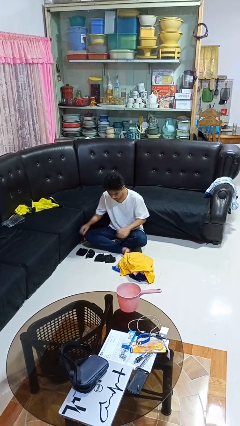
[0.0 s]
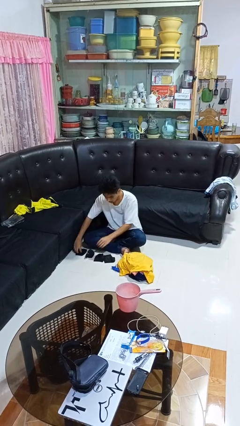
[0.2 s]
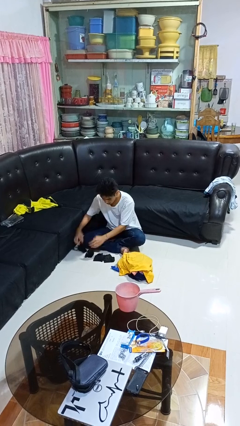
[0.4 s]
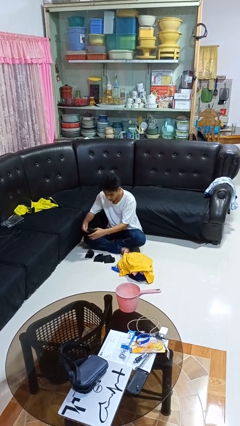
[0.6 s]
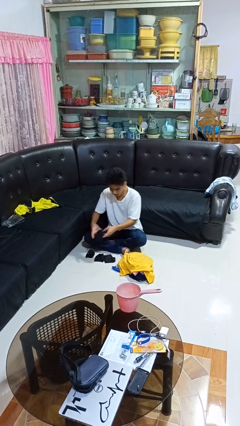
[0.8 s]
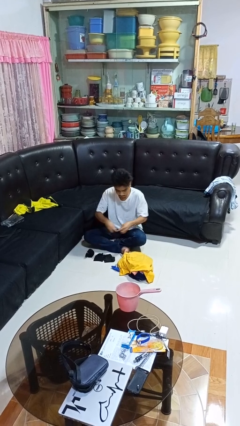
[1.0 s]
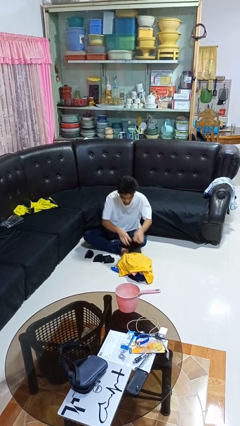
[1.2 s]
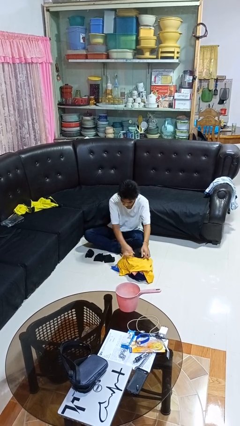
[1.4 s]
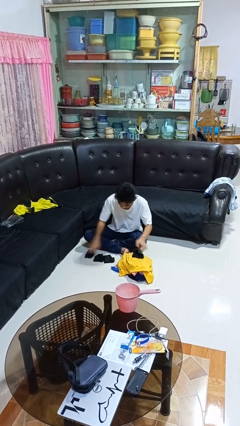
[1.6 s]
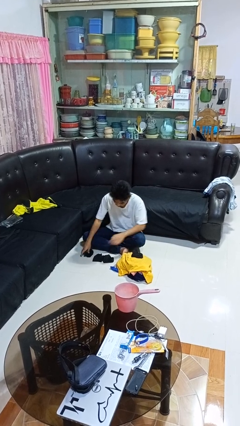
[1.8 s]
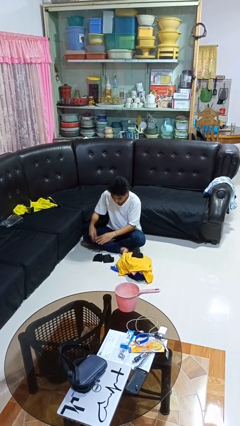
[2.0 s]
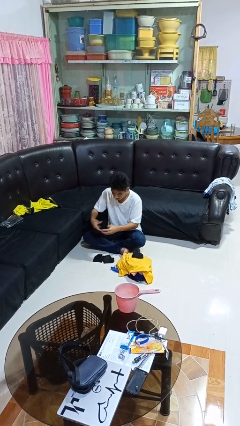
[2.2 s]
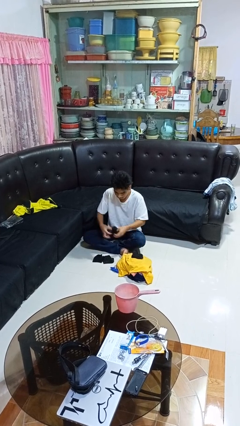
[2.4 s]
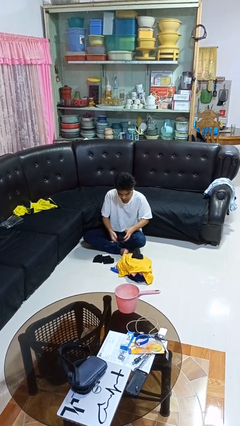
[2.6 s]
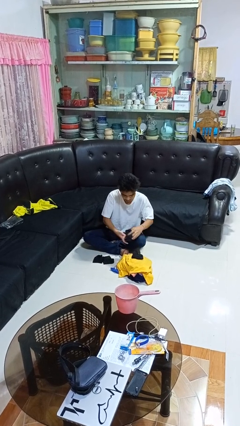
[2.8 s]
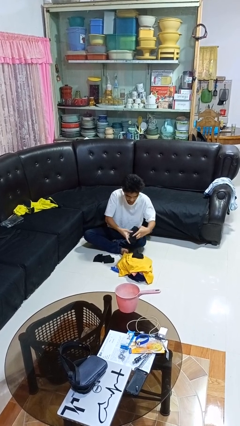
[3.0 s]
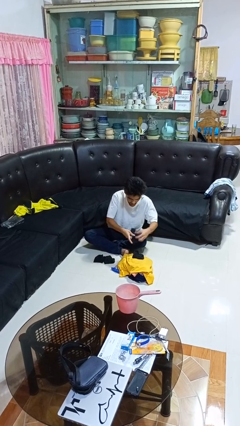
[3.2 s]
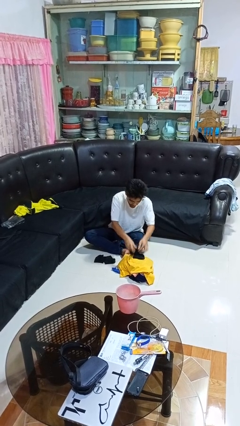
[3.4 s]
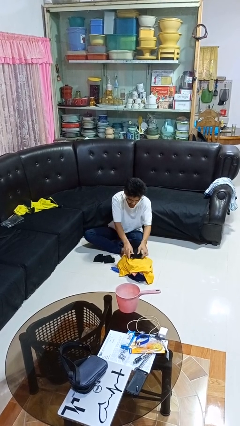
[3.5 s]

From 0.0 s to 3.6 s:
person folds socks

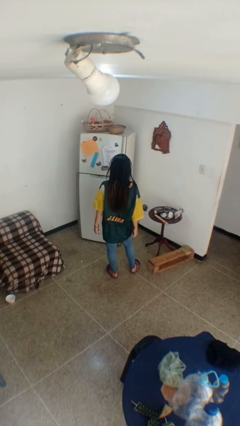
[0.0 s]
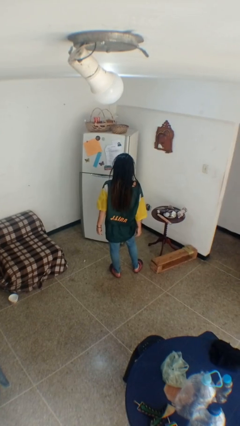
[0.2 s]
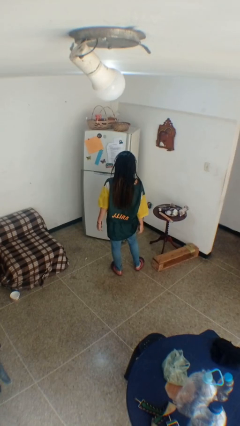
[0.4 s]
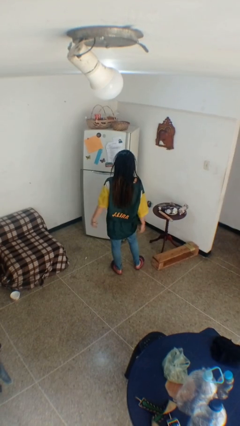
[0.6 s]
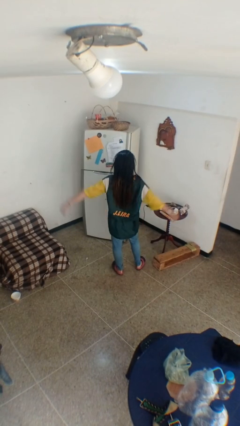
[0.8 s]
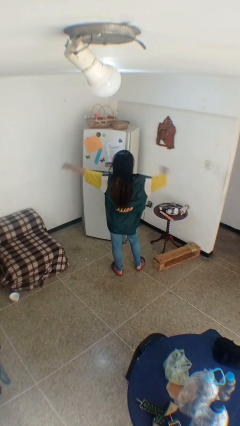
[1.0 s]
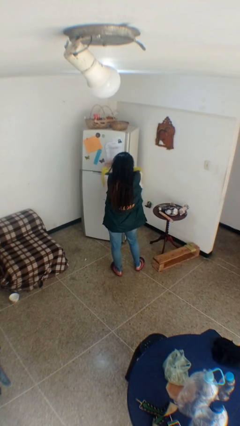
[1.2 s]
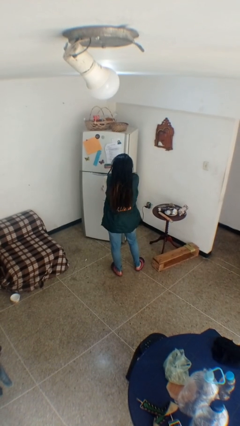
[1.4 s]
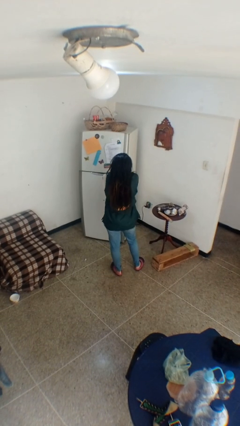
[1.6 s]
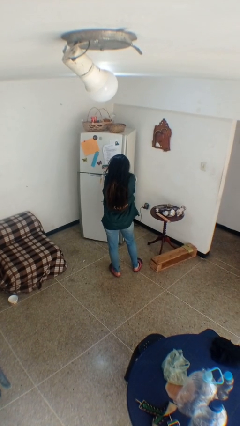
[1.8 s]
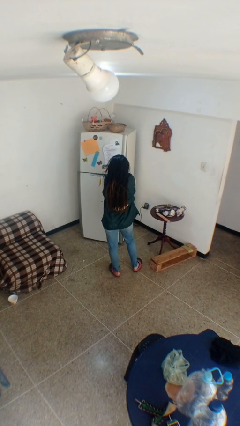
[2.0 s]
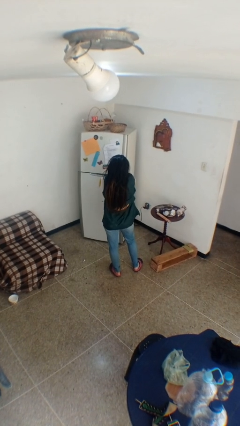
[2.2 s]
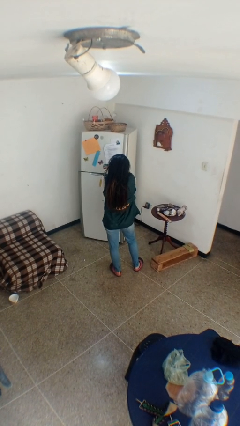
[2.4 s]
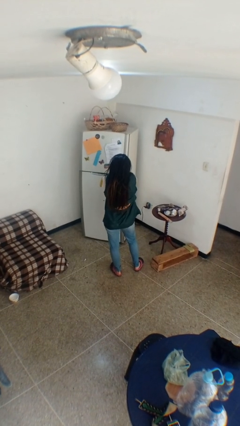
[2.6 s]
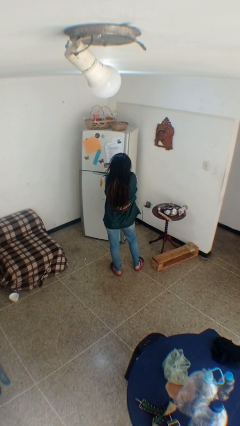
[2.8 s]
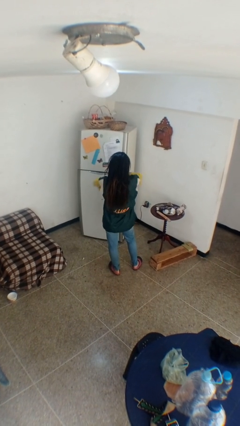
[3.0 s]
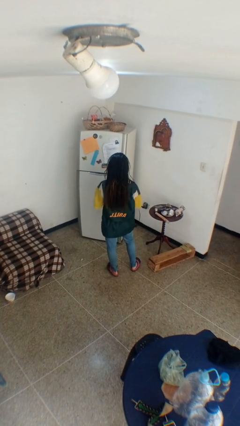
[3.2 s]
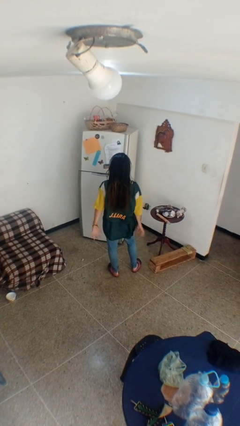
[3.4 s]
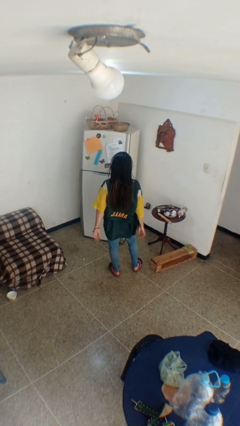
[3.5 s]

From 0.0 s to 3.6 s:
person gestures arms x

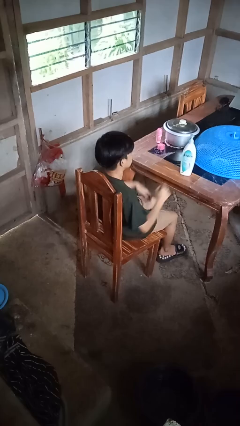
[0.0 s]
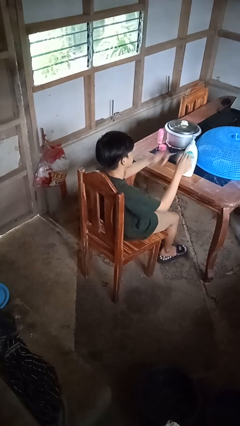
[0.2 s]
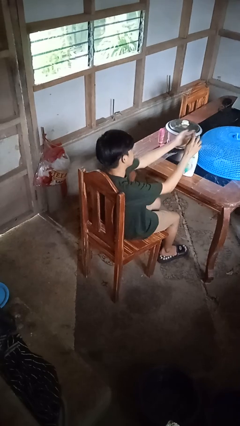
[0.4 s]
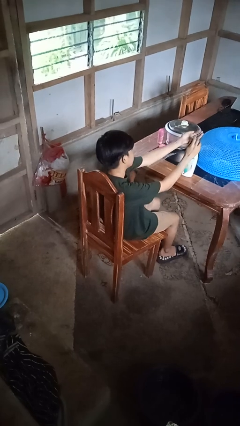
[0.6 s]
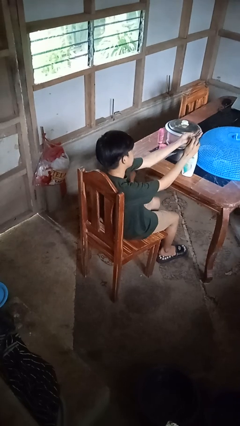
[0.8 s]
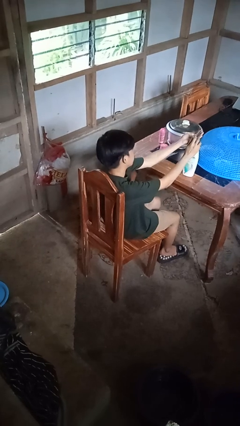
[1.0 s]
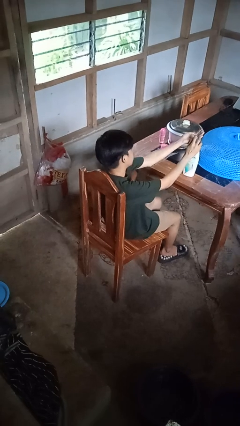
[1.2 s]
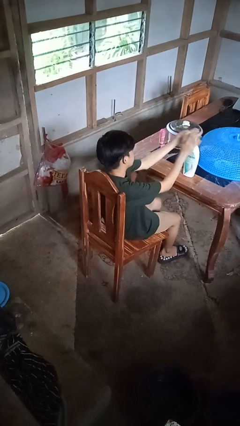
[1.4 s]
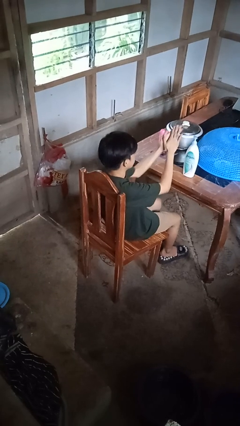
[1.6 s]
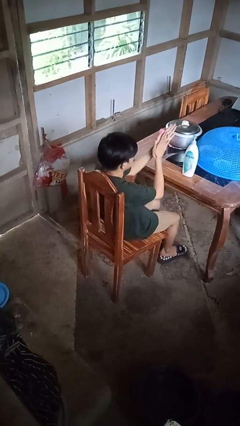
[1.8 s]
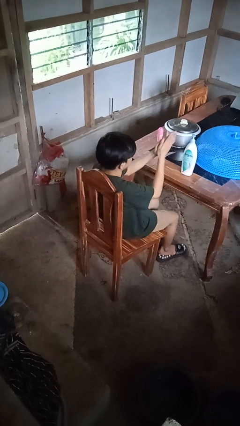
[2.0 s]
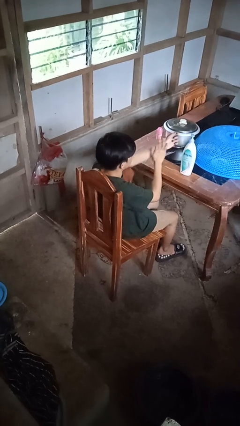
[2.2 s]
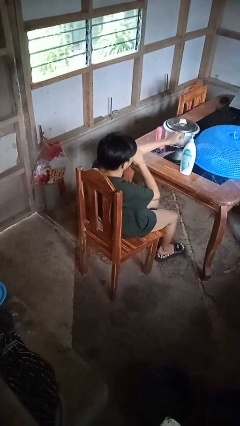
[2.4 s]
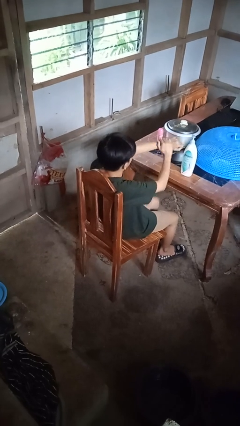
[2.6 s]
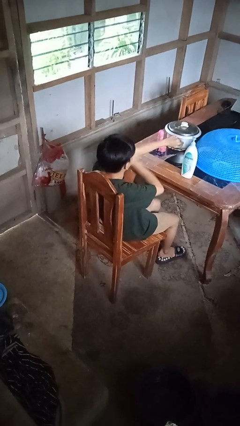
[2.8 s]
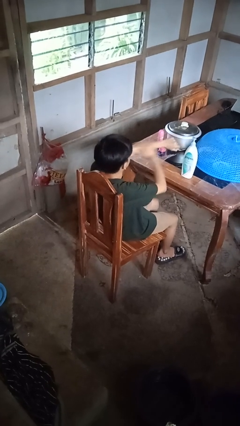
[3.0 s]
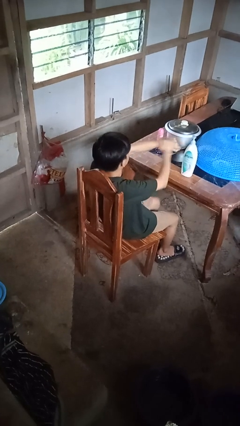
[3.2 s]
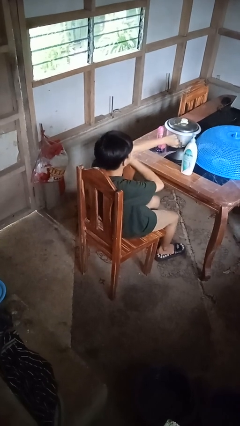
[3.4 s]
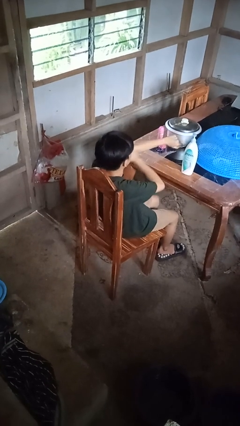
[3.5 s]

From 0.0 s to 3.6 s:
person applies sunscreen

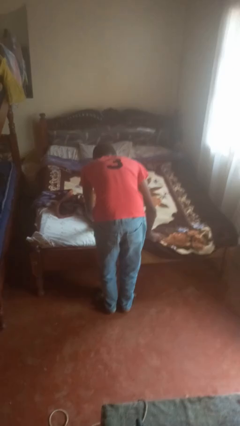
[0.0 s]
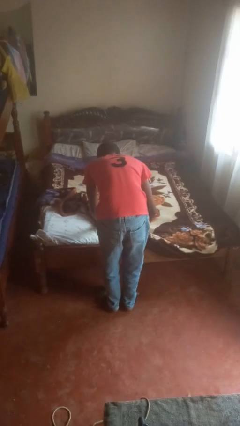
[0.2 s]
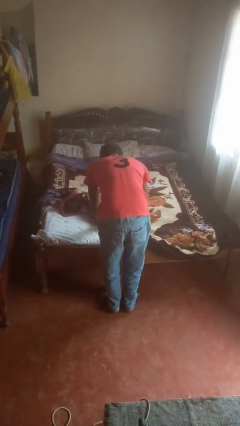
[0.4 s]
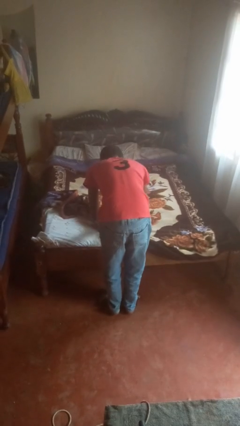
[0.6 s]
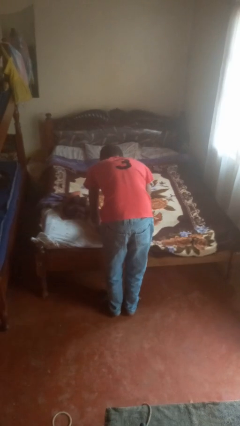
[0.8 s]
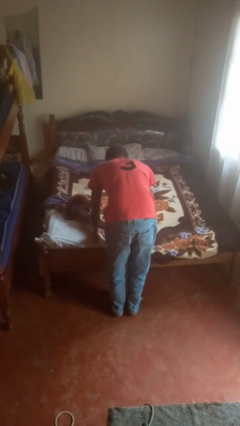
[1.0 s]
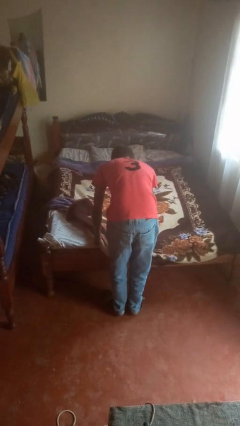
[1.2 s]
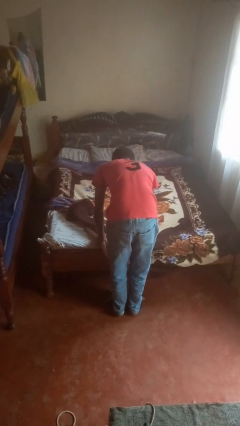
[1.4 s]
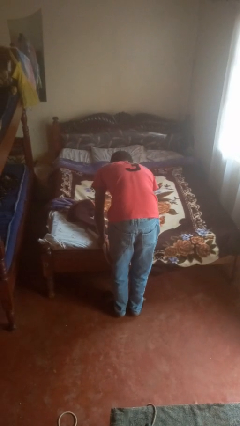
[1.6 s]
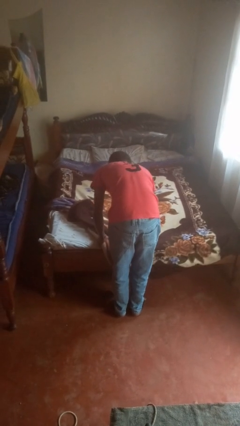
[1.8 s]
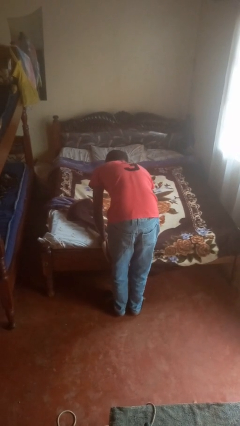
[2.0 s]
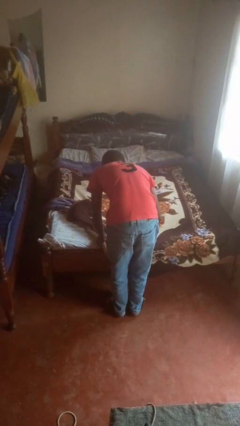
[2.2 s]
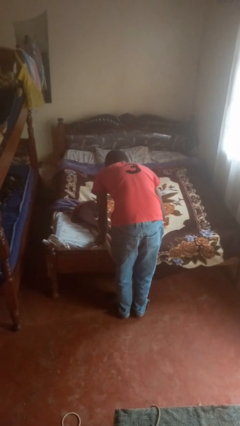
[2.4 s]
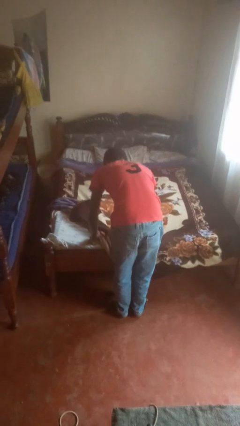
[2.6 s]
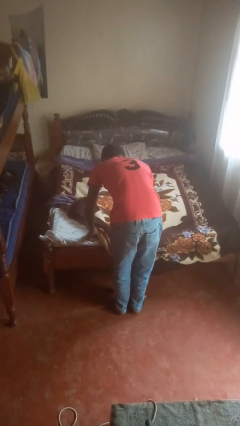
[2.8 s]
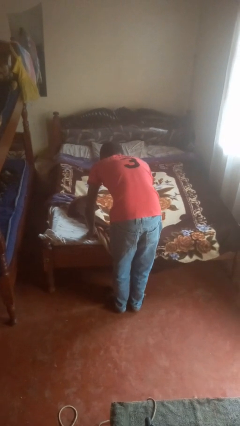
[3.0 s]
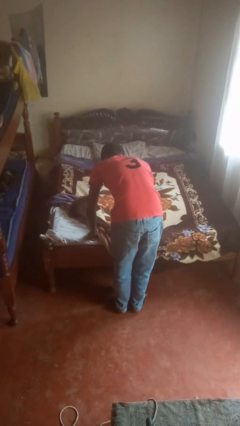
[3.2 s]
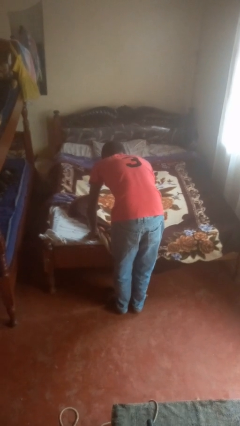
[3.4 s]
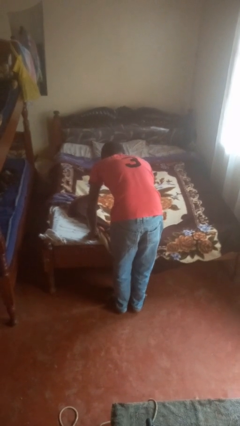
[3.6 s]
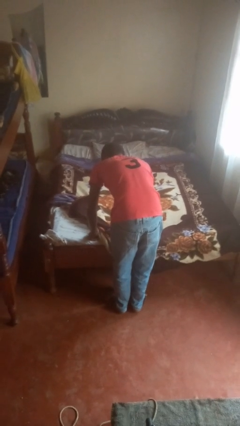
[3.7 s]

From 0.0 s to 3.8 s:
person makes bed

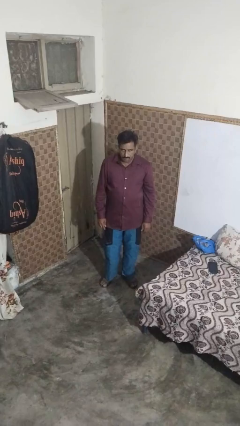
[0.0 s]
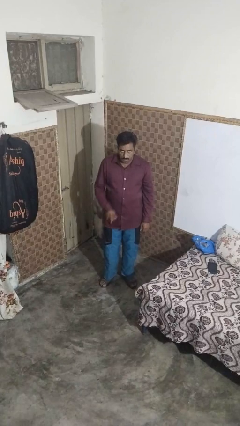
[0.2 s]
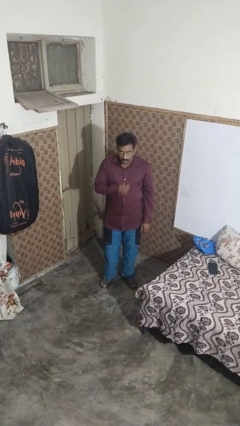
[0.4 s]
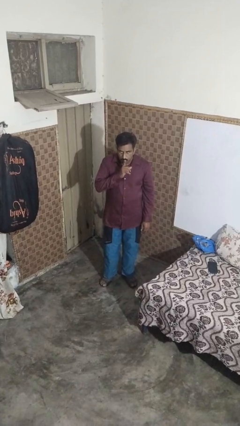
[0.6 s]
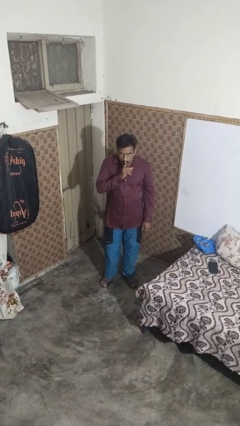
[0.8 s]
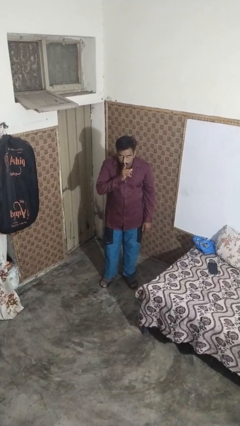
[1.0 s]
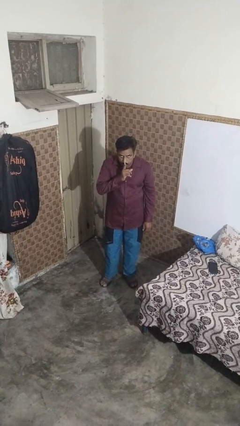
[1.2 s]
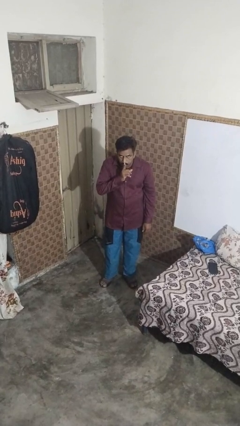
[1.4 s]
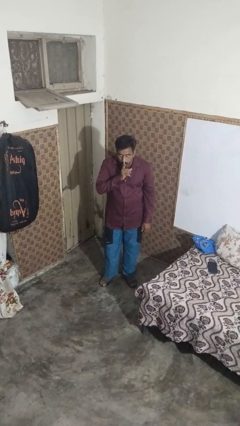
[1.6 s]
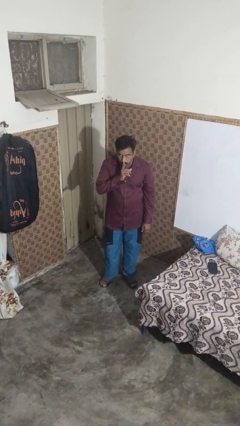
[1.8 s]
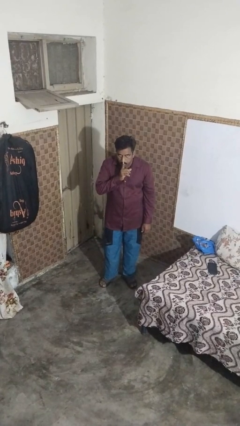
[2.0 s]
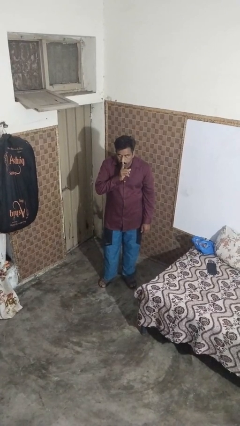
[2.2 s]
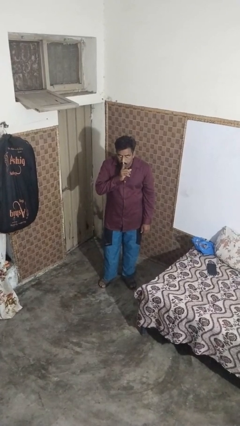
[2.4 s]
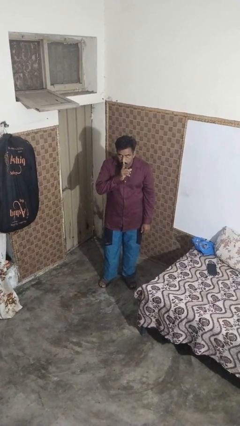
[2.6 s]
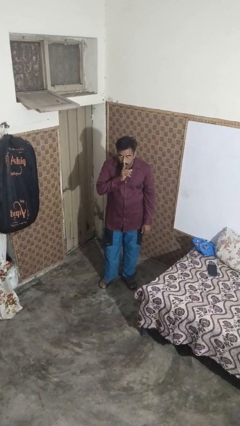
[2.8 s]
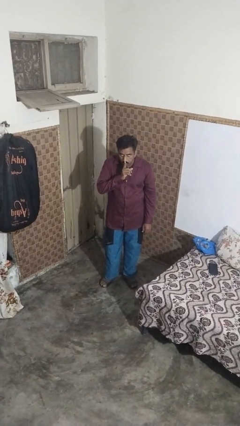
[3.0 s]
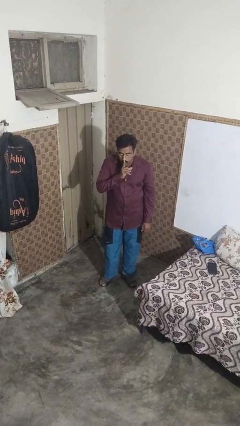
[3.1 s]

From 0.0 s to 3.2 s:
person gestures be quiet
